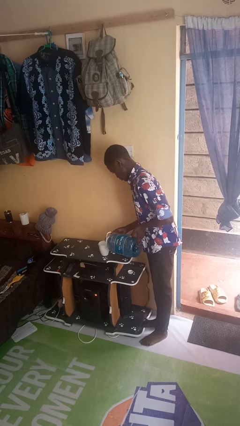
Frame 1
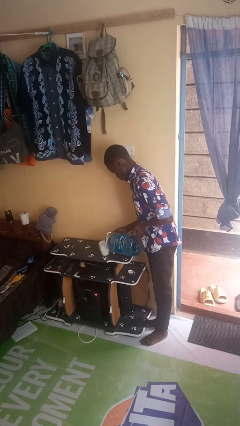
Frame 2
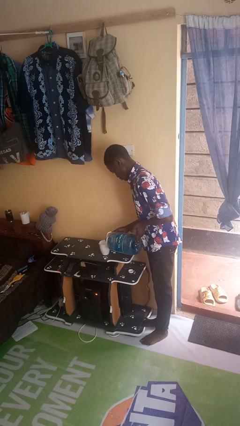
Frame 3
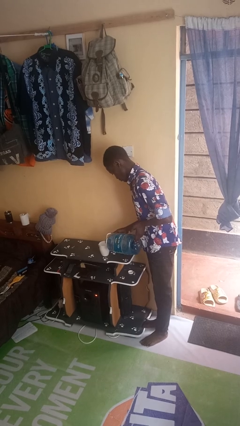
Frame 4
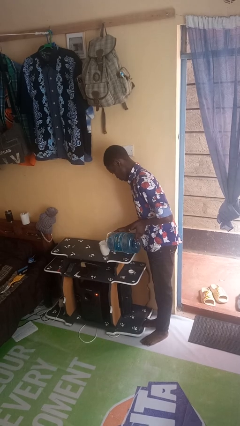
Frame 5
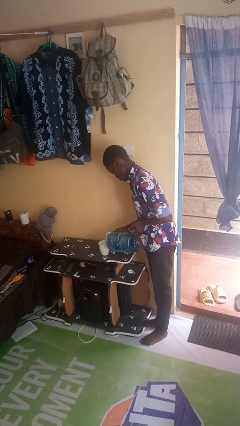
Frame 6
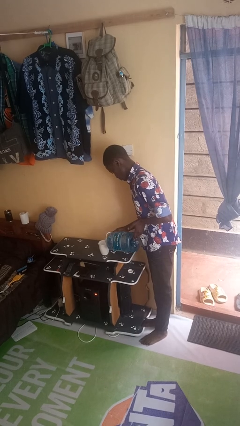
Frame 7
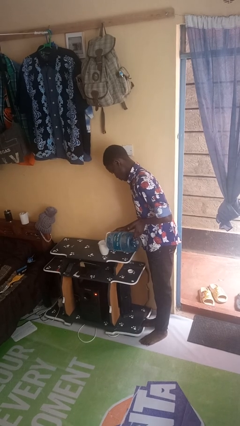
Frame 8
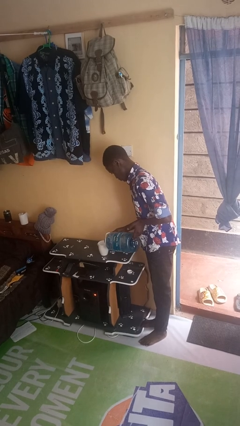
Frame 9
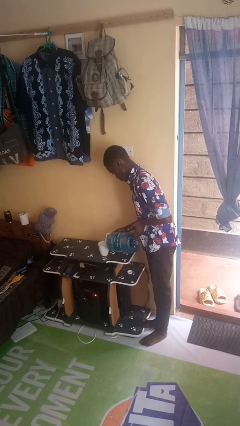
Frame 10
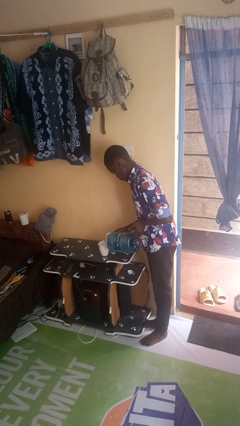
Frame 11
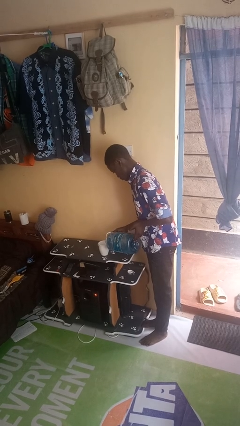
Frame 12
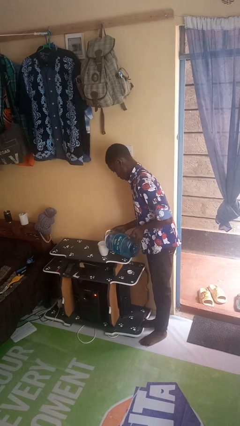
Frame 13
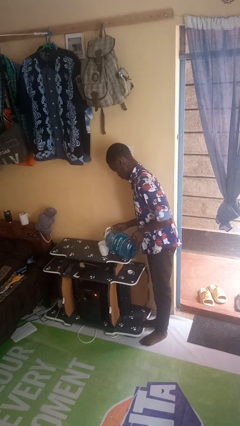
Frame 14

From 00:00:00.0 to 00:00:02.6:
person pours liquid into cup

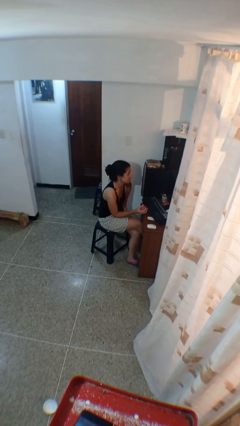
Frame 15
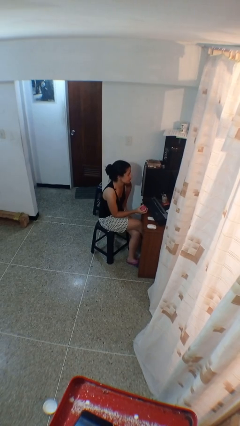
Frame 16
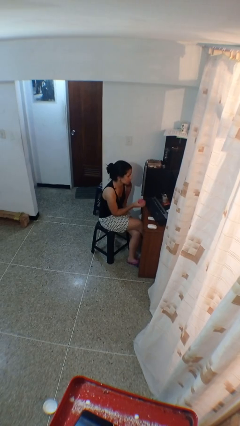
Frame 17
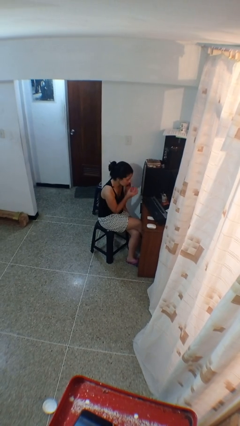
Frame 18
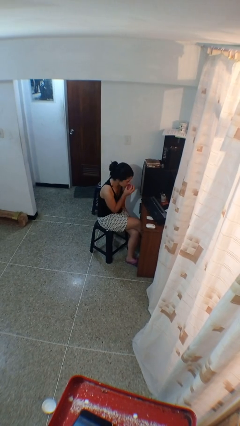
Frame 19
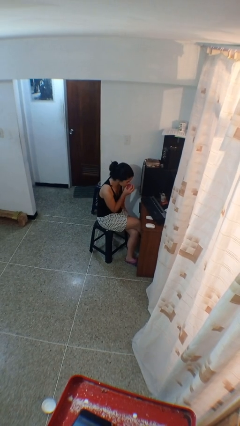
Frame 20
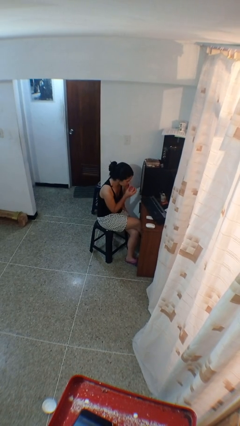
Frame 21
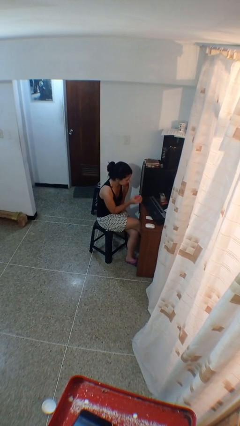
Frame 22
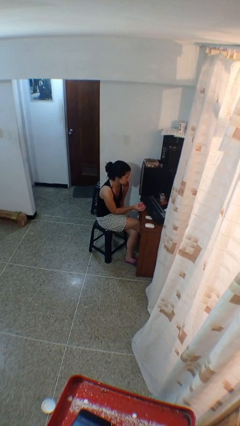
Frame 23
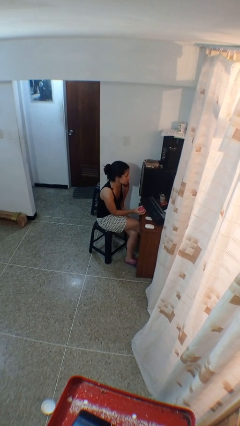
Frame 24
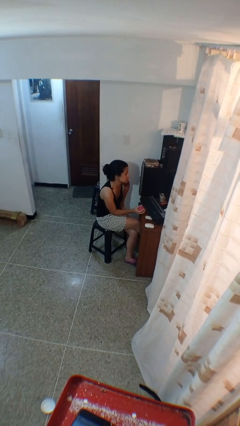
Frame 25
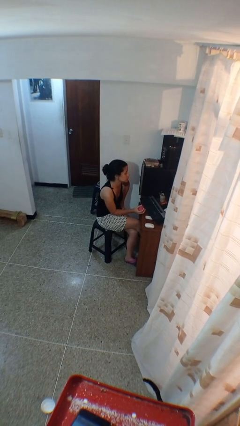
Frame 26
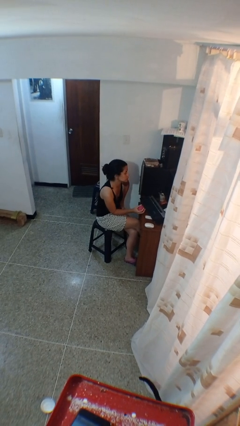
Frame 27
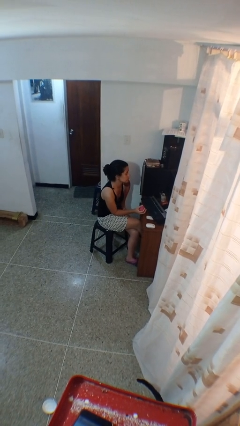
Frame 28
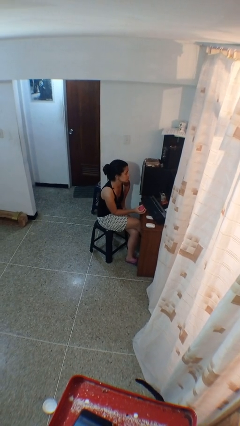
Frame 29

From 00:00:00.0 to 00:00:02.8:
person eats apple

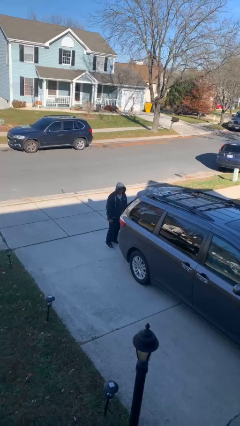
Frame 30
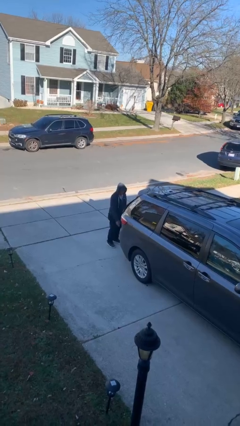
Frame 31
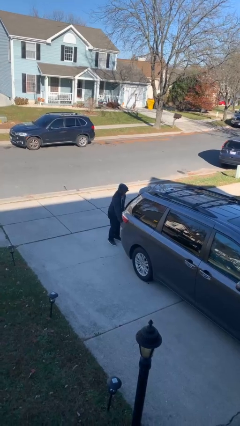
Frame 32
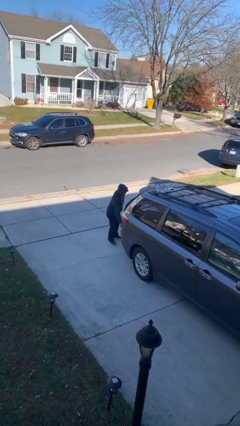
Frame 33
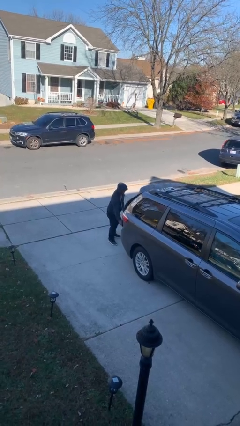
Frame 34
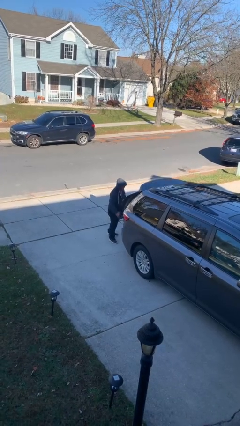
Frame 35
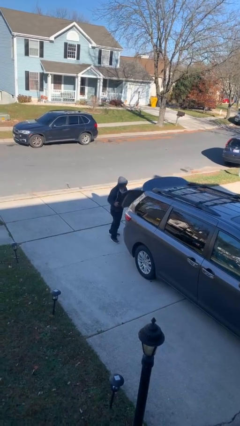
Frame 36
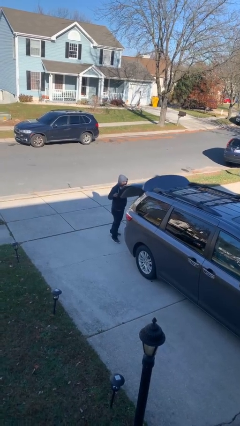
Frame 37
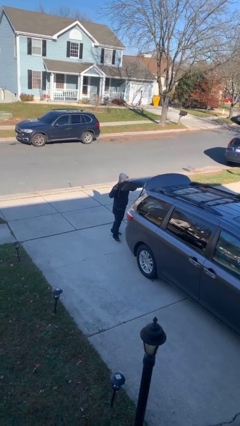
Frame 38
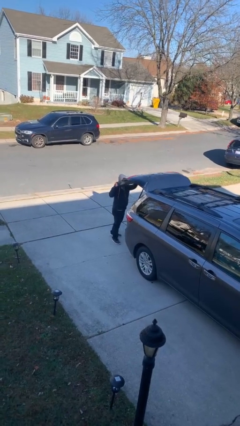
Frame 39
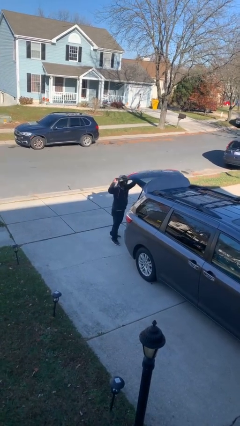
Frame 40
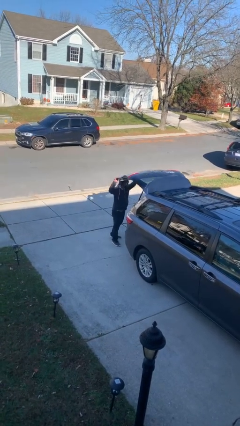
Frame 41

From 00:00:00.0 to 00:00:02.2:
person opens car trunk

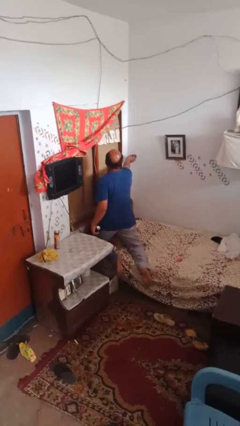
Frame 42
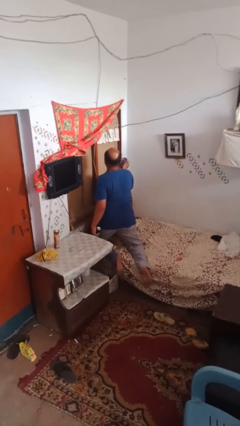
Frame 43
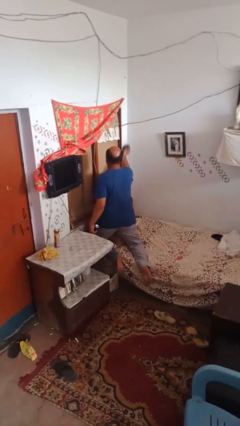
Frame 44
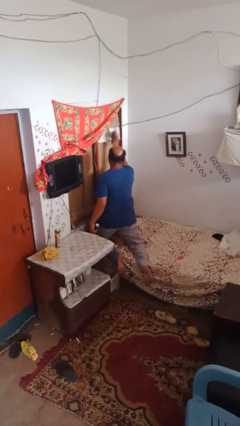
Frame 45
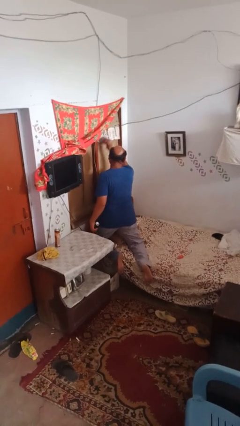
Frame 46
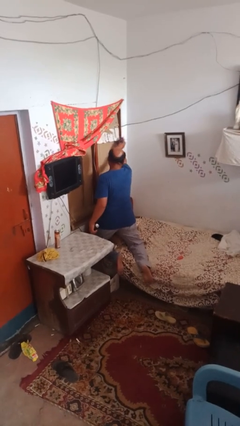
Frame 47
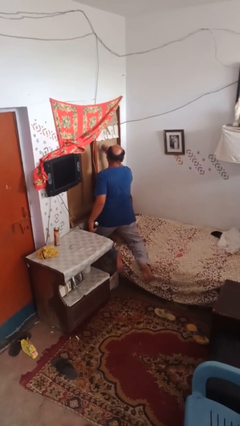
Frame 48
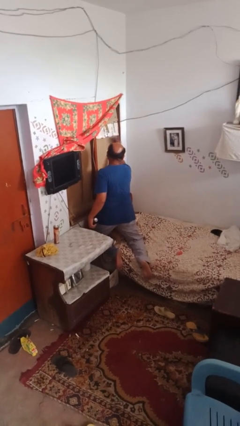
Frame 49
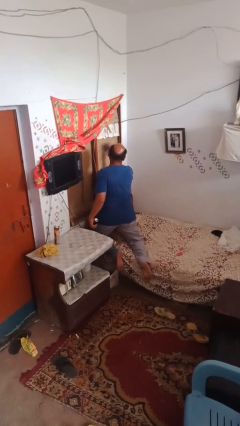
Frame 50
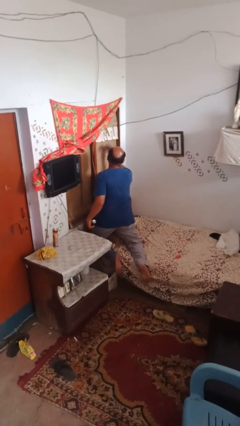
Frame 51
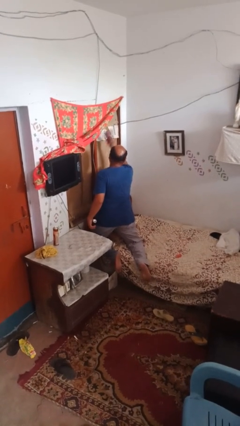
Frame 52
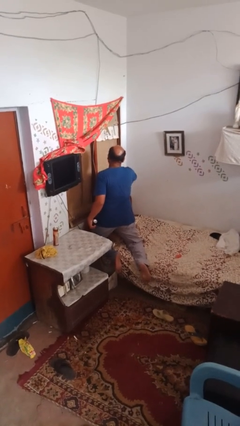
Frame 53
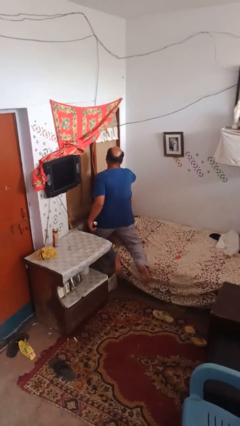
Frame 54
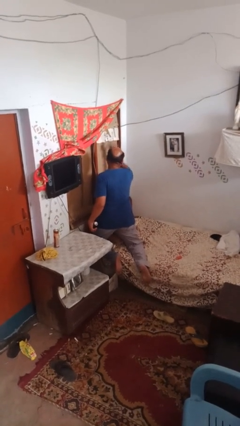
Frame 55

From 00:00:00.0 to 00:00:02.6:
person washes window

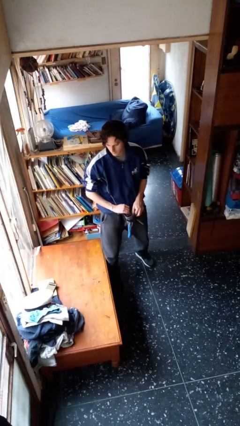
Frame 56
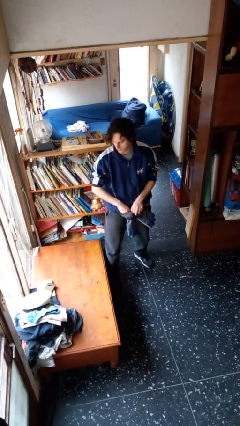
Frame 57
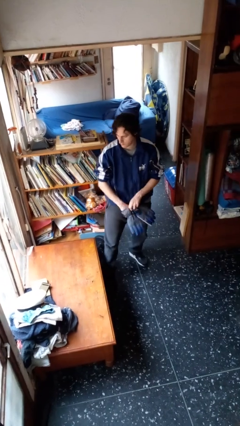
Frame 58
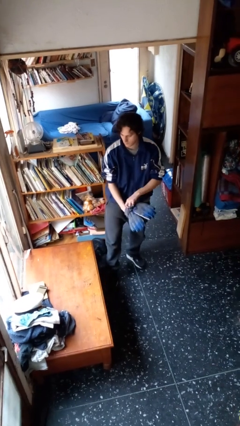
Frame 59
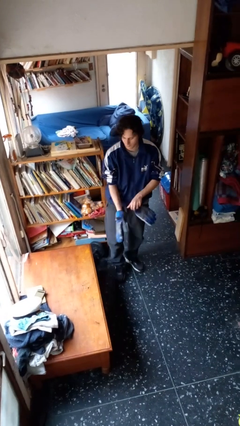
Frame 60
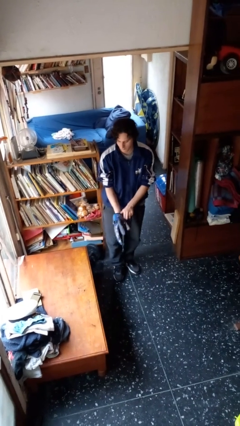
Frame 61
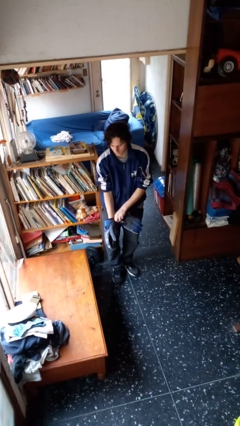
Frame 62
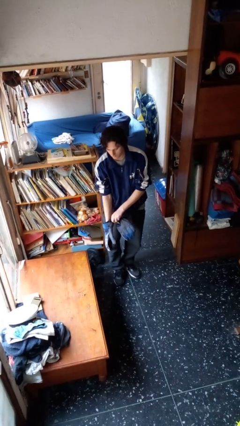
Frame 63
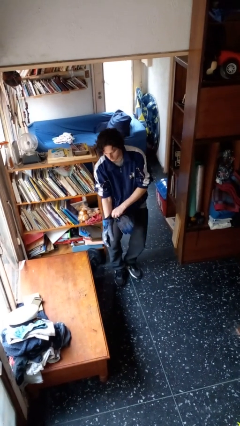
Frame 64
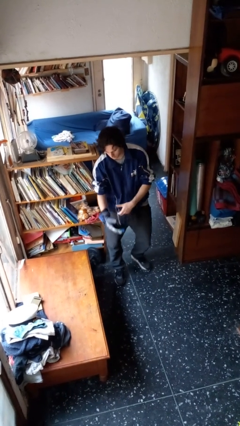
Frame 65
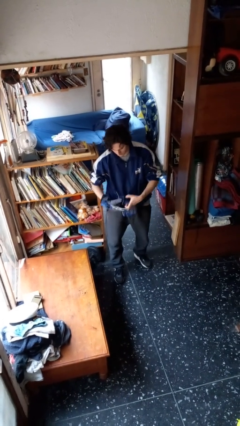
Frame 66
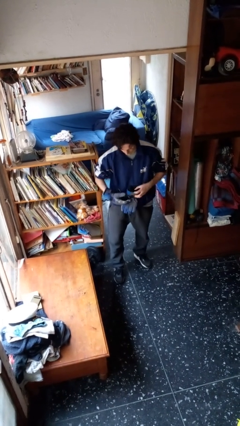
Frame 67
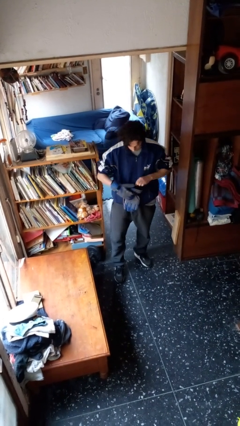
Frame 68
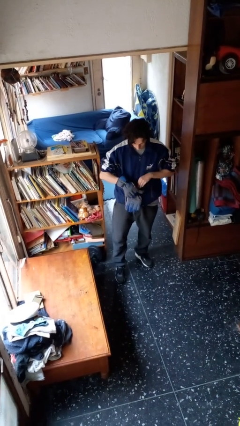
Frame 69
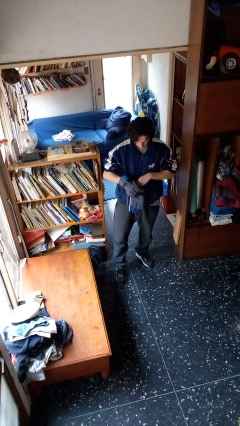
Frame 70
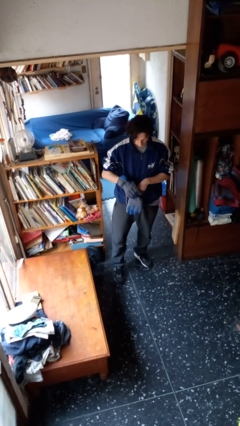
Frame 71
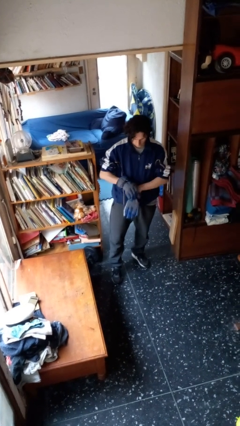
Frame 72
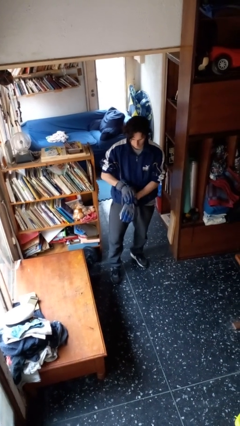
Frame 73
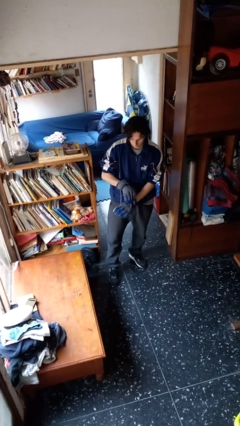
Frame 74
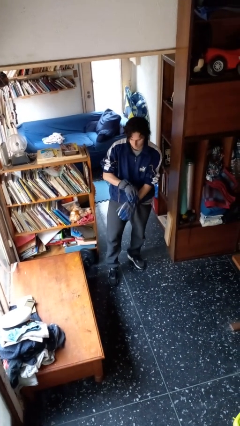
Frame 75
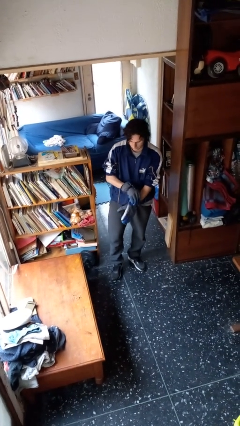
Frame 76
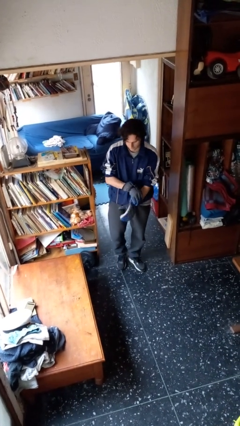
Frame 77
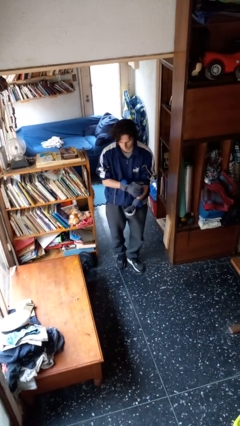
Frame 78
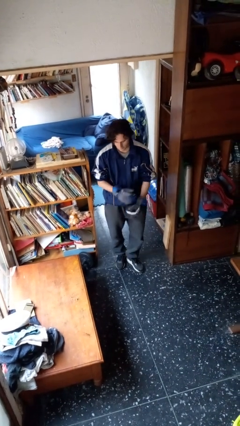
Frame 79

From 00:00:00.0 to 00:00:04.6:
person puts on gloves

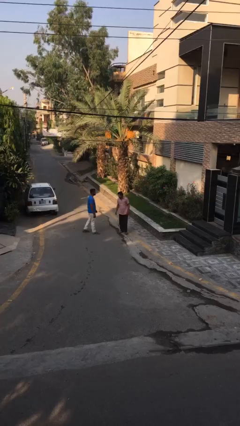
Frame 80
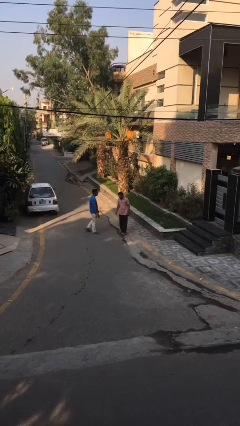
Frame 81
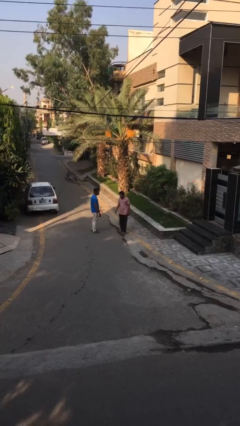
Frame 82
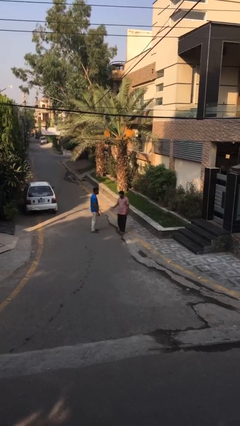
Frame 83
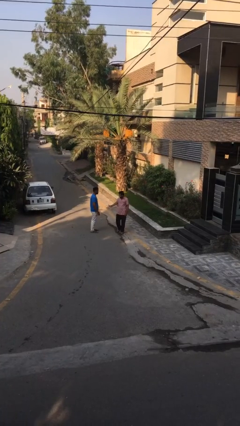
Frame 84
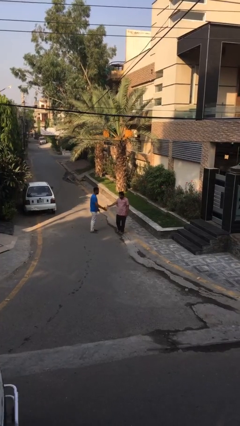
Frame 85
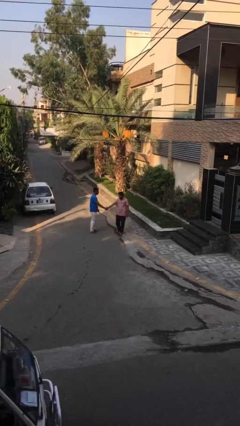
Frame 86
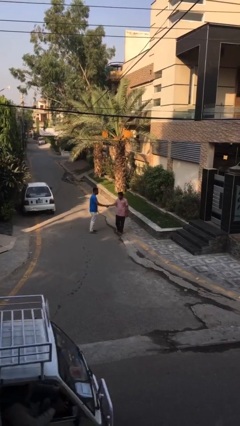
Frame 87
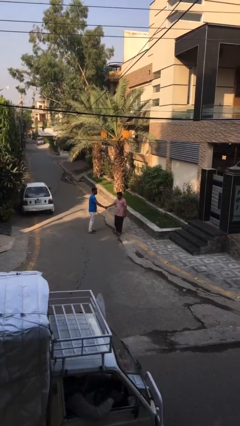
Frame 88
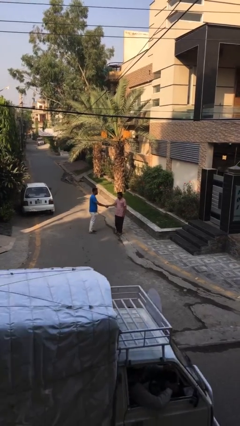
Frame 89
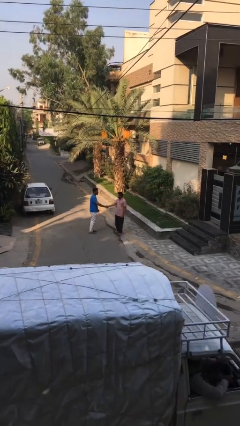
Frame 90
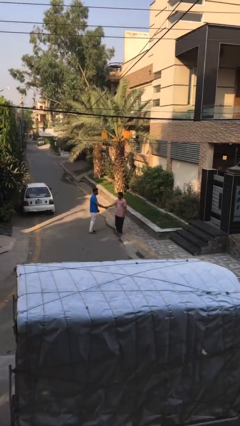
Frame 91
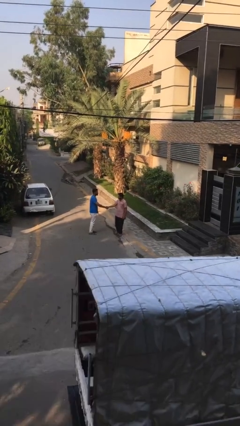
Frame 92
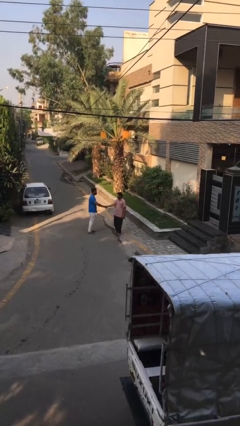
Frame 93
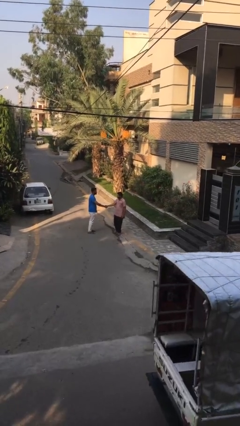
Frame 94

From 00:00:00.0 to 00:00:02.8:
person shakes hand
